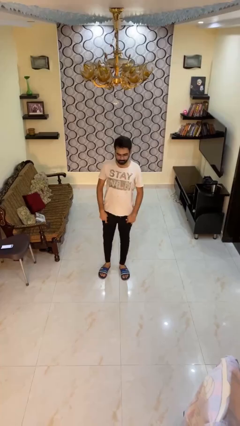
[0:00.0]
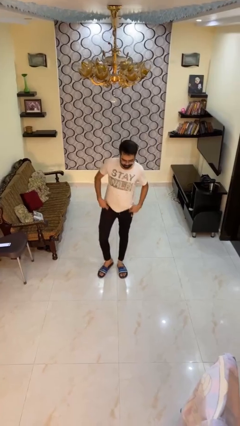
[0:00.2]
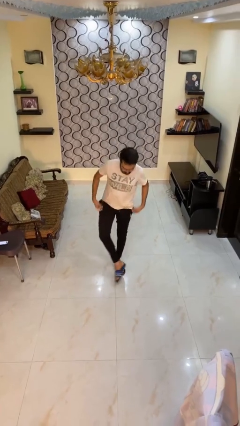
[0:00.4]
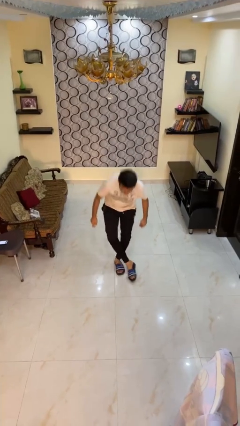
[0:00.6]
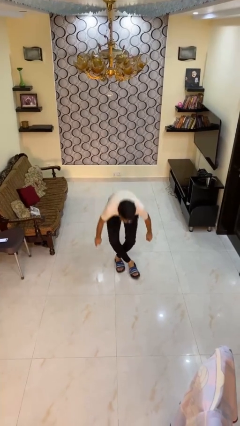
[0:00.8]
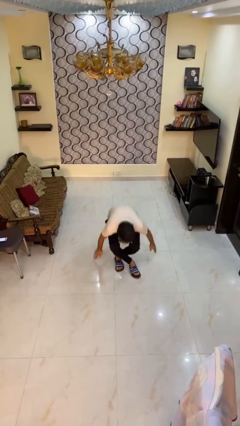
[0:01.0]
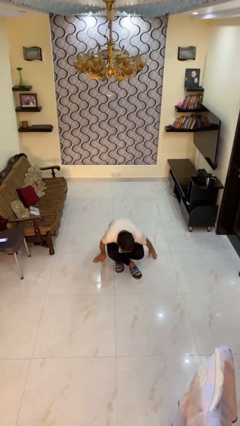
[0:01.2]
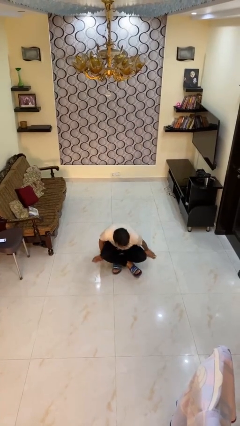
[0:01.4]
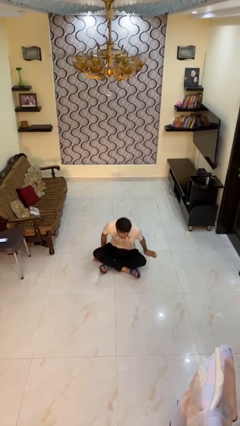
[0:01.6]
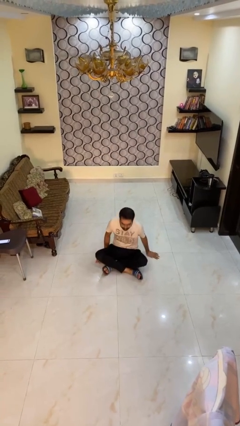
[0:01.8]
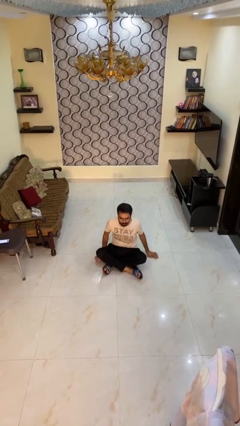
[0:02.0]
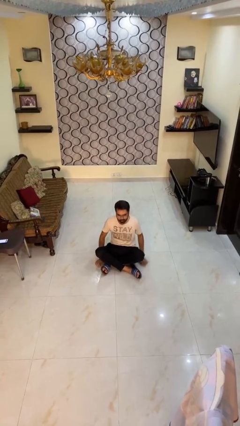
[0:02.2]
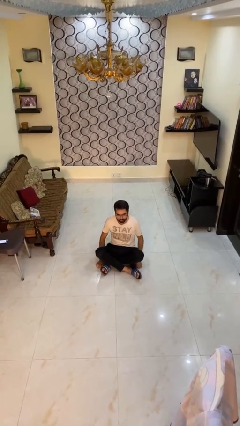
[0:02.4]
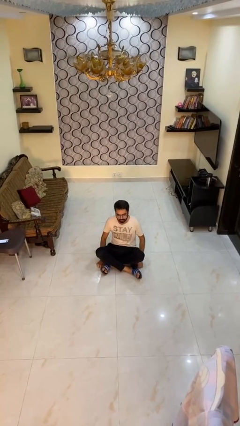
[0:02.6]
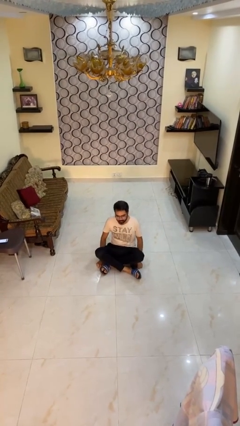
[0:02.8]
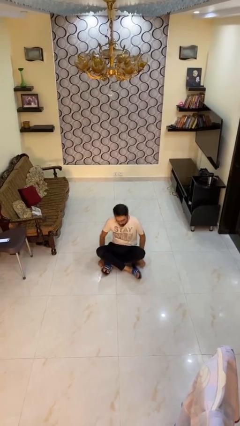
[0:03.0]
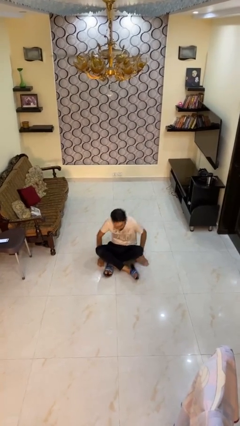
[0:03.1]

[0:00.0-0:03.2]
person sits crisscross

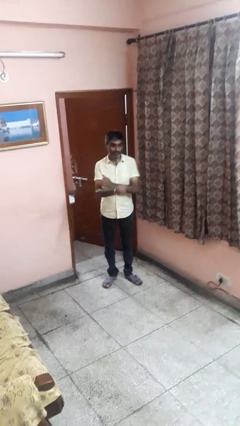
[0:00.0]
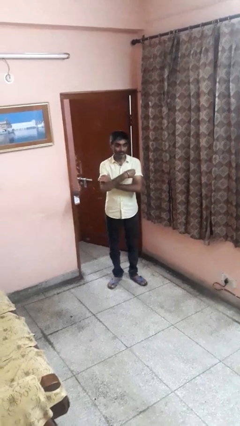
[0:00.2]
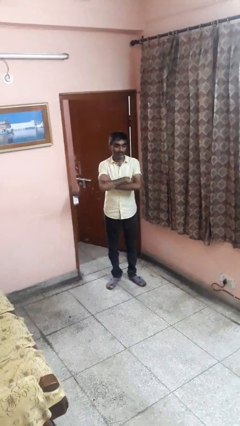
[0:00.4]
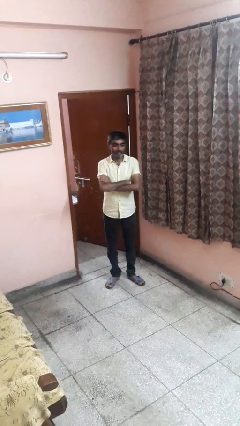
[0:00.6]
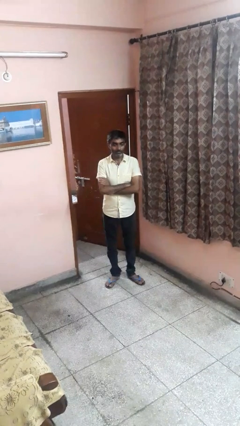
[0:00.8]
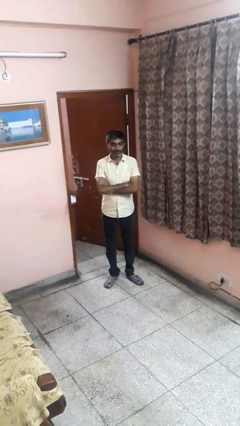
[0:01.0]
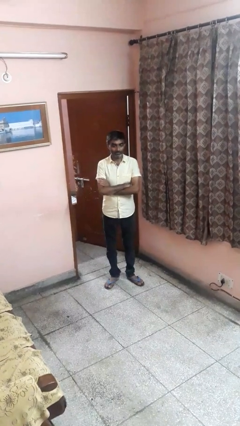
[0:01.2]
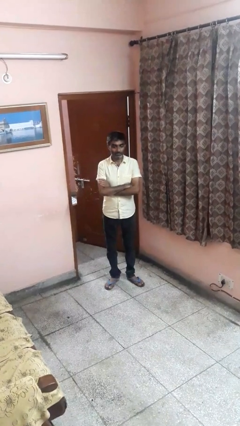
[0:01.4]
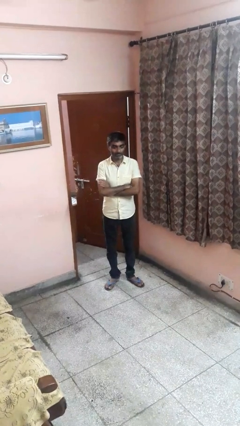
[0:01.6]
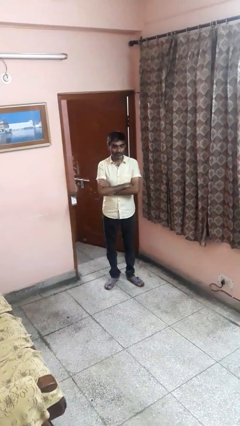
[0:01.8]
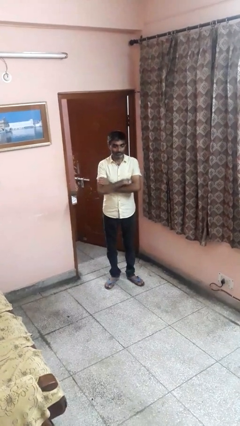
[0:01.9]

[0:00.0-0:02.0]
person crosses arms

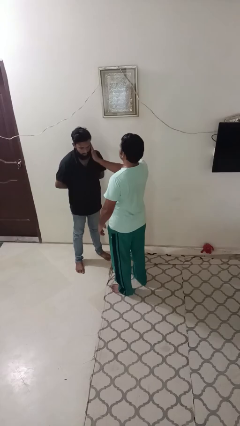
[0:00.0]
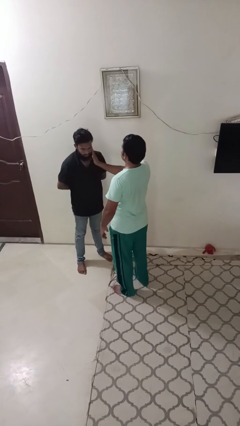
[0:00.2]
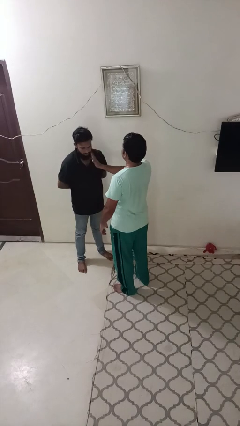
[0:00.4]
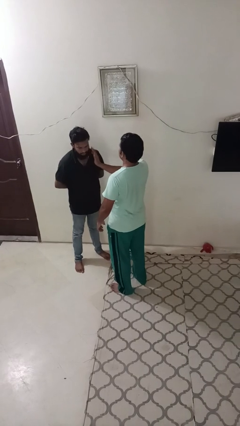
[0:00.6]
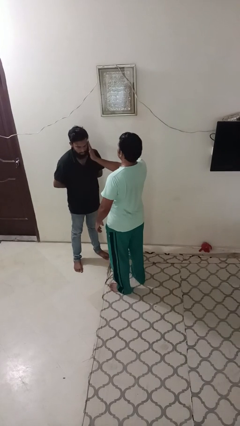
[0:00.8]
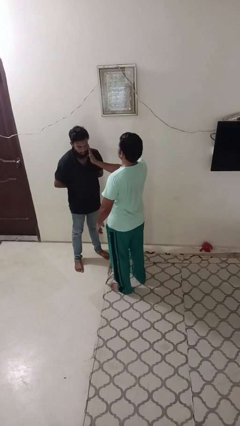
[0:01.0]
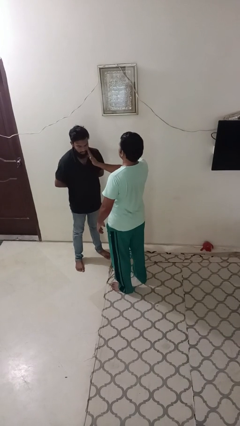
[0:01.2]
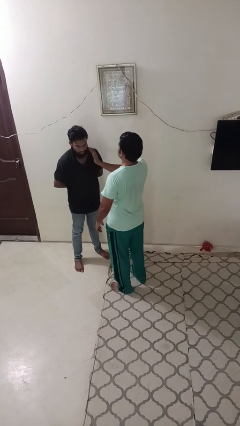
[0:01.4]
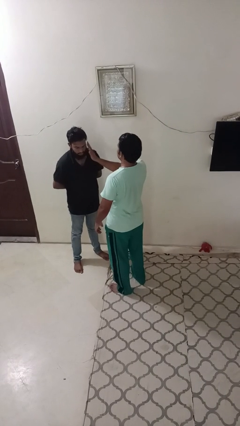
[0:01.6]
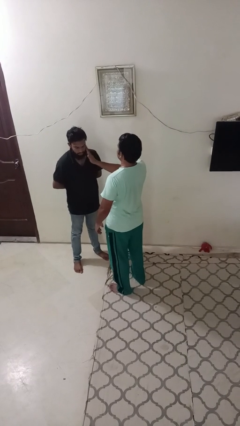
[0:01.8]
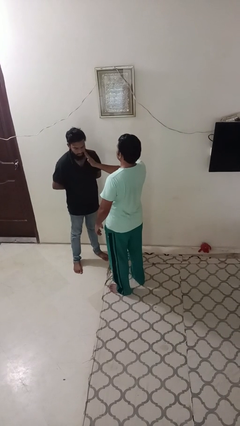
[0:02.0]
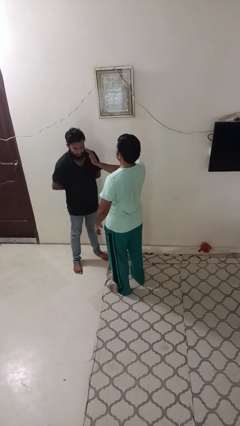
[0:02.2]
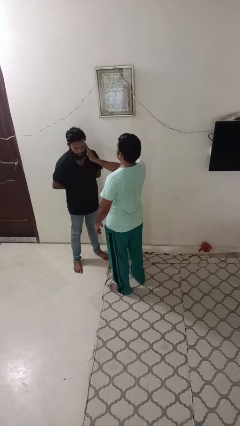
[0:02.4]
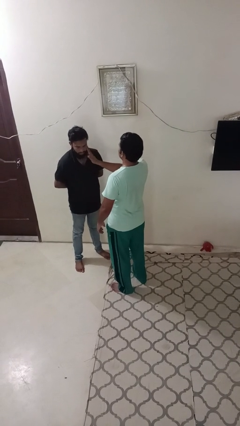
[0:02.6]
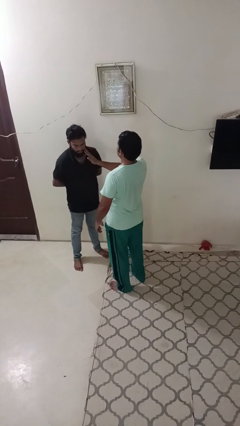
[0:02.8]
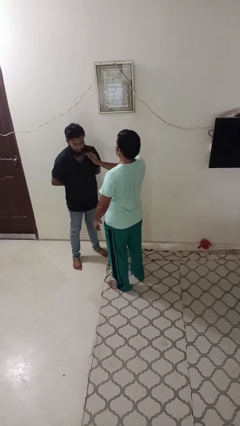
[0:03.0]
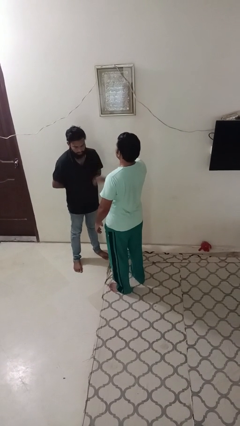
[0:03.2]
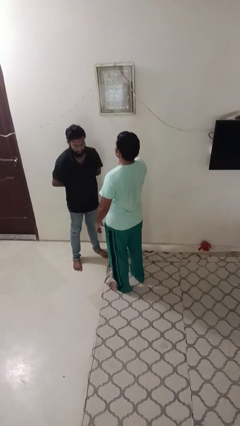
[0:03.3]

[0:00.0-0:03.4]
person touches face of person

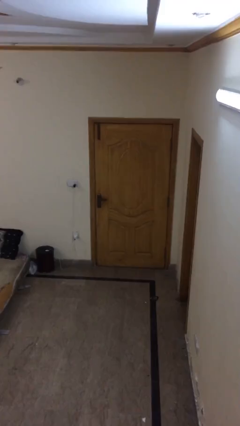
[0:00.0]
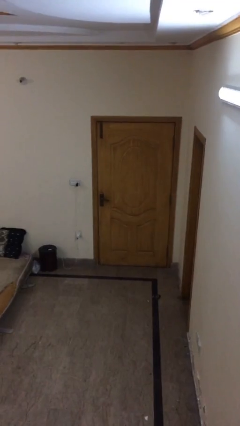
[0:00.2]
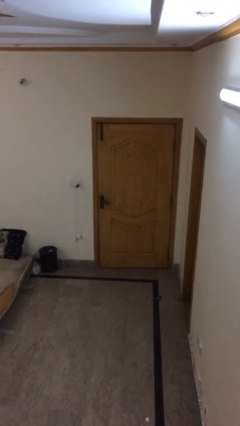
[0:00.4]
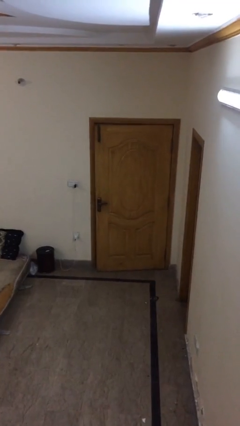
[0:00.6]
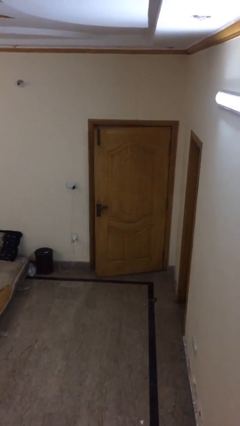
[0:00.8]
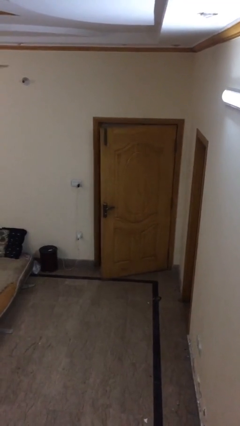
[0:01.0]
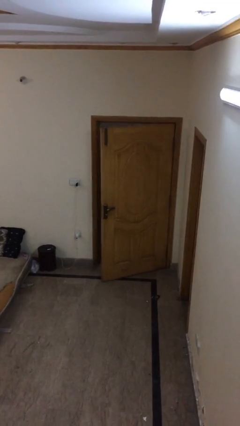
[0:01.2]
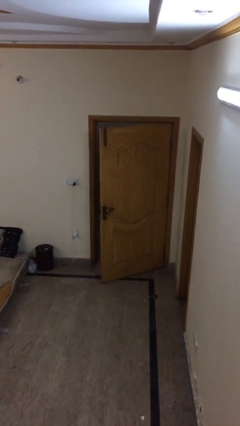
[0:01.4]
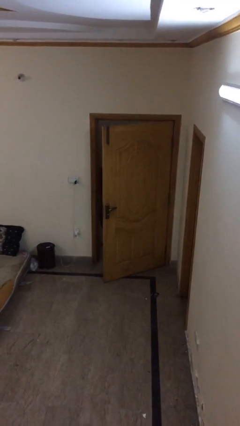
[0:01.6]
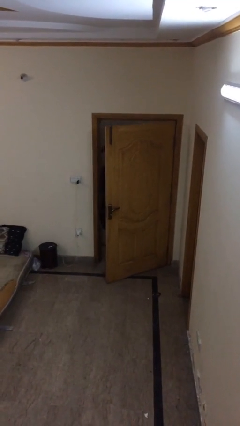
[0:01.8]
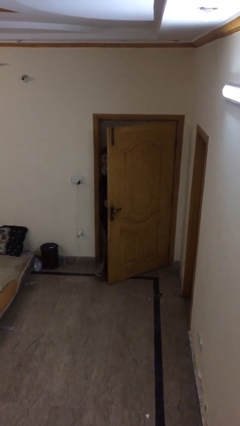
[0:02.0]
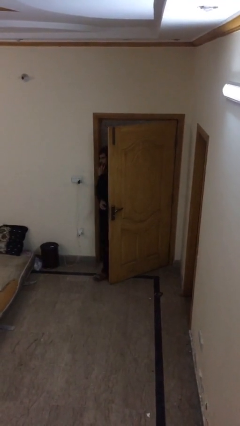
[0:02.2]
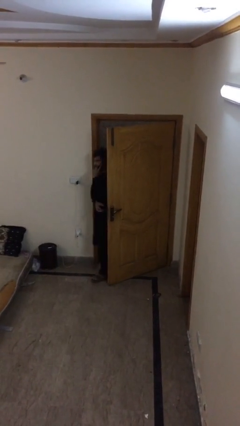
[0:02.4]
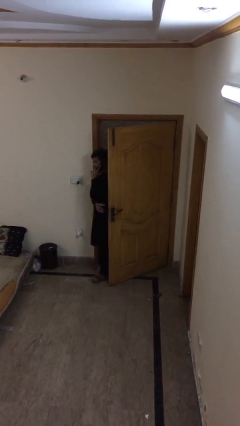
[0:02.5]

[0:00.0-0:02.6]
person opens facility door

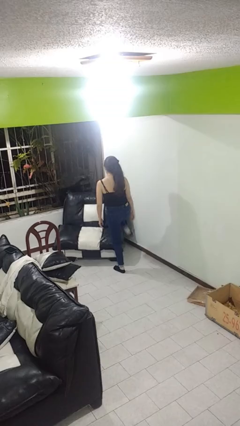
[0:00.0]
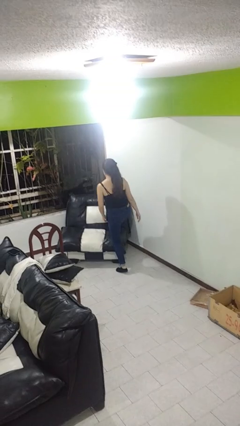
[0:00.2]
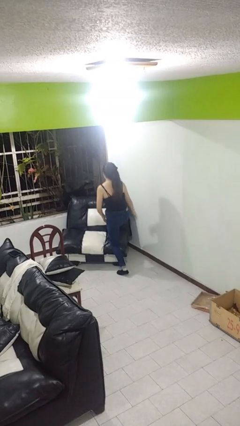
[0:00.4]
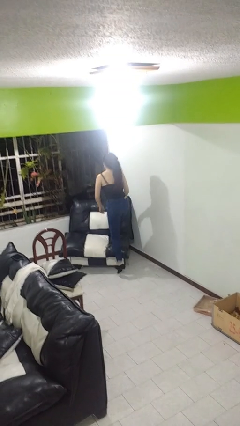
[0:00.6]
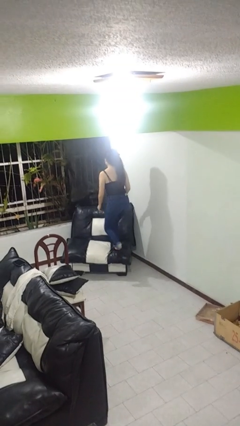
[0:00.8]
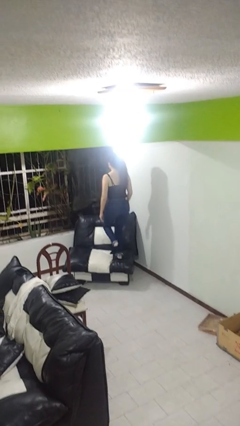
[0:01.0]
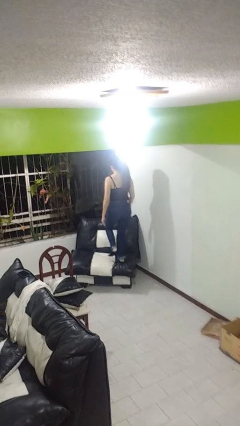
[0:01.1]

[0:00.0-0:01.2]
person climbs on couch

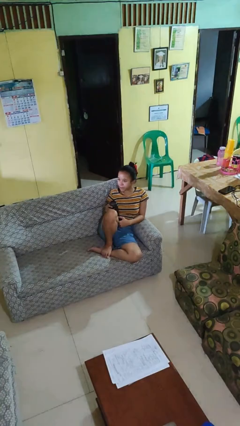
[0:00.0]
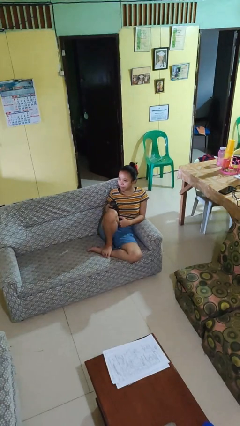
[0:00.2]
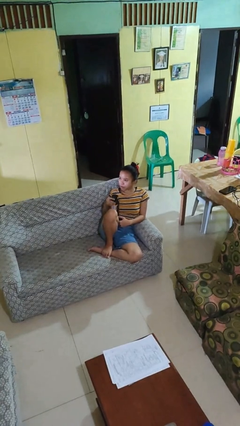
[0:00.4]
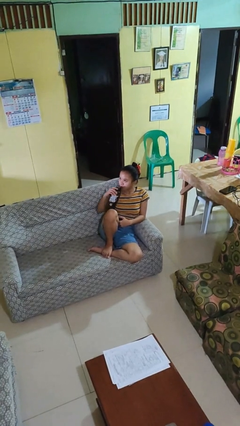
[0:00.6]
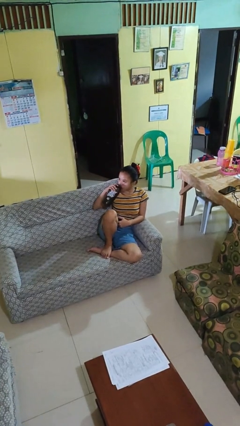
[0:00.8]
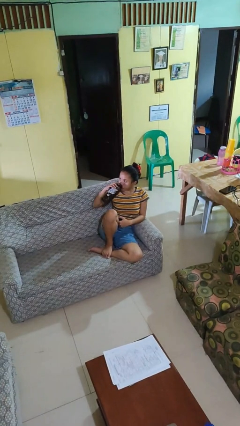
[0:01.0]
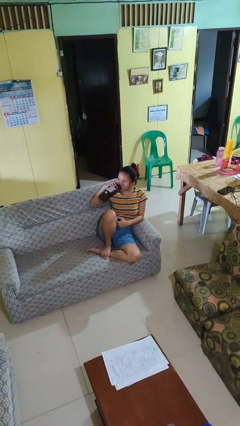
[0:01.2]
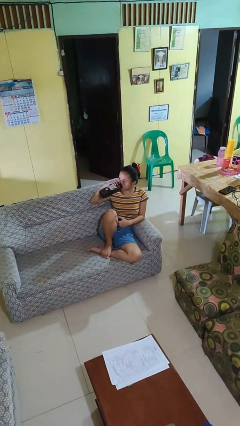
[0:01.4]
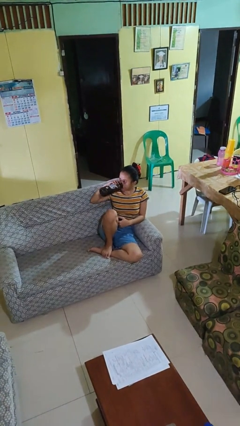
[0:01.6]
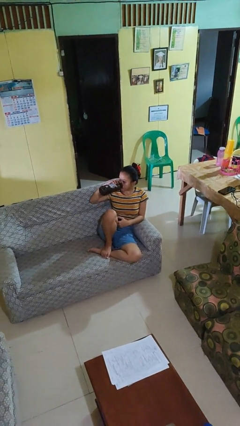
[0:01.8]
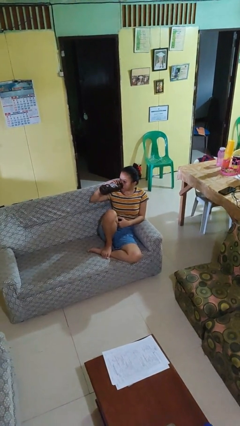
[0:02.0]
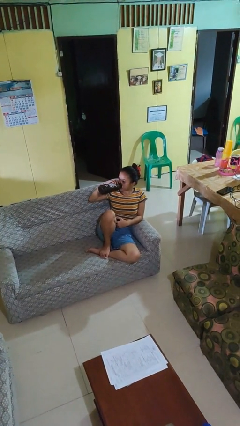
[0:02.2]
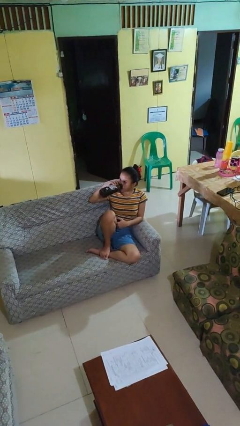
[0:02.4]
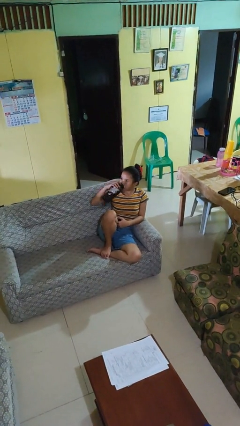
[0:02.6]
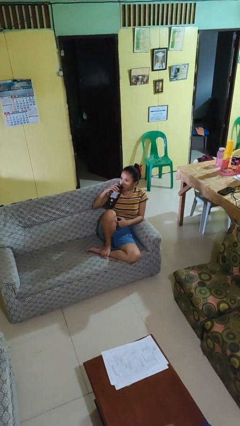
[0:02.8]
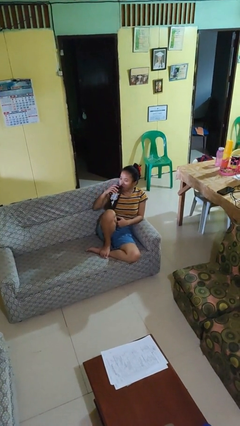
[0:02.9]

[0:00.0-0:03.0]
person drinks from bottle

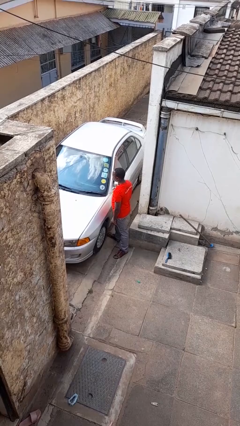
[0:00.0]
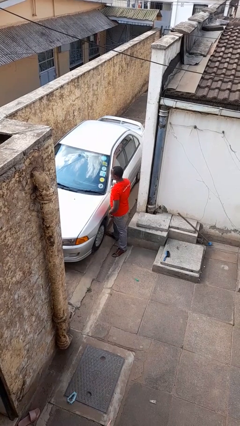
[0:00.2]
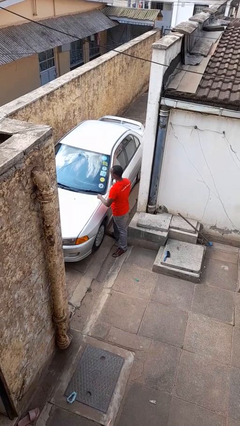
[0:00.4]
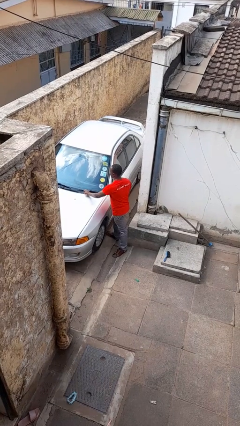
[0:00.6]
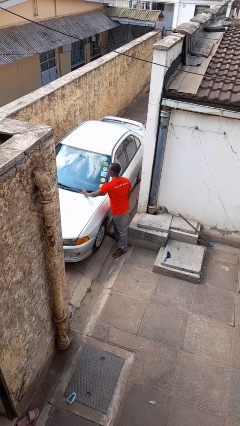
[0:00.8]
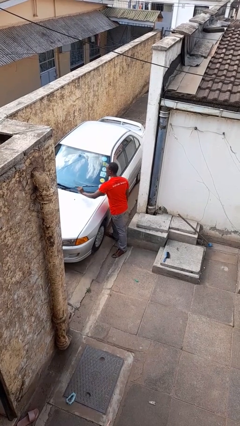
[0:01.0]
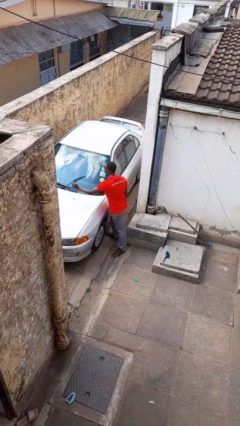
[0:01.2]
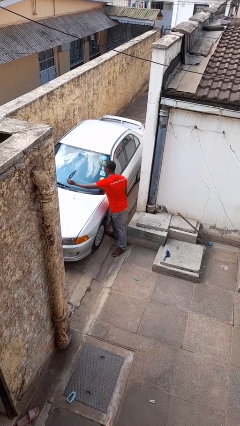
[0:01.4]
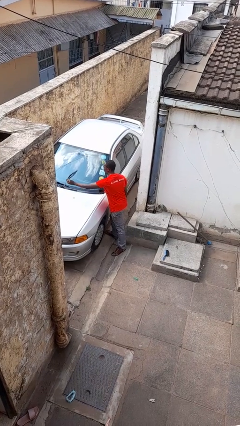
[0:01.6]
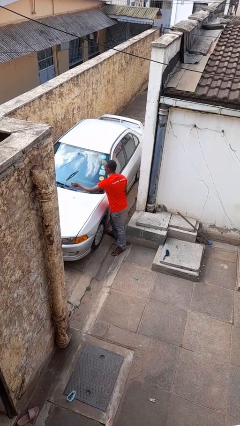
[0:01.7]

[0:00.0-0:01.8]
person flips up car wipers
